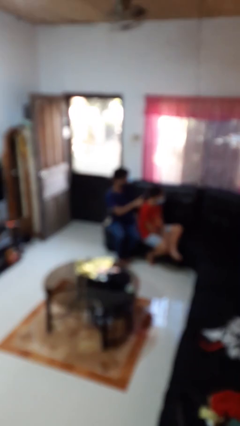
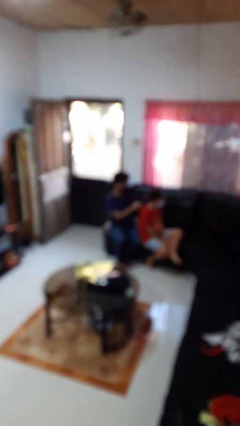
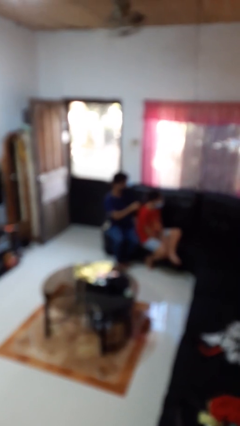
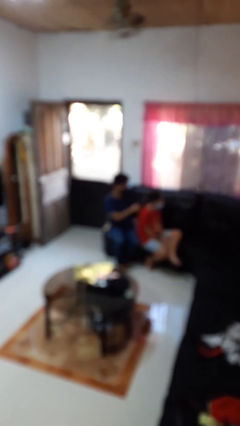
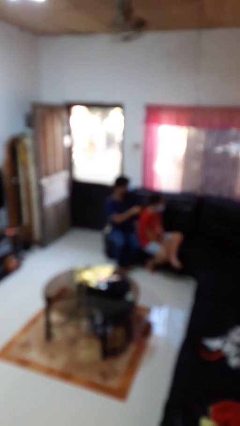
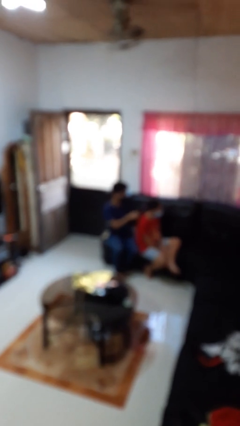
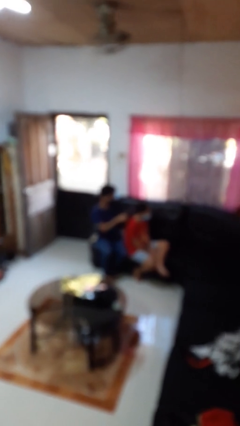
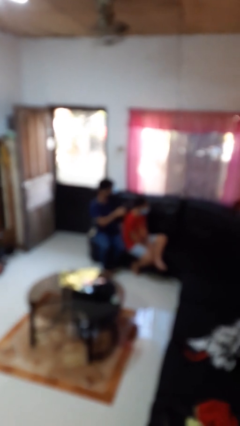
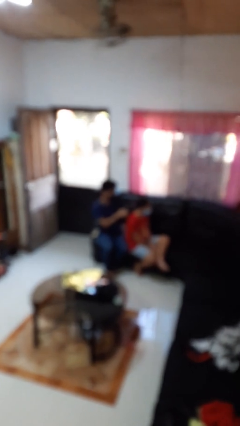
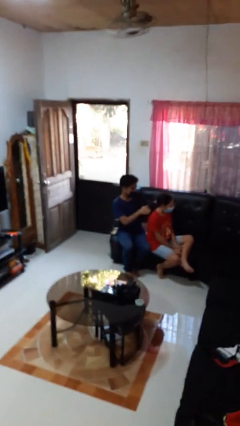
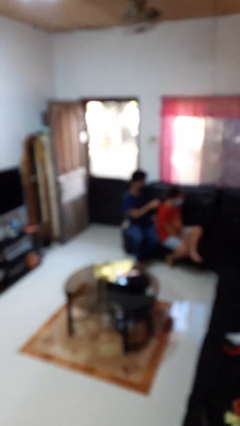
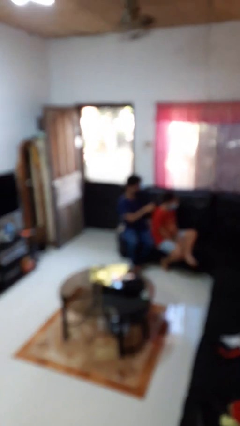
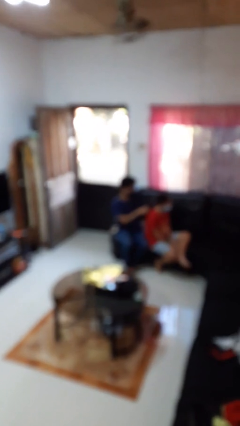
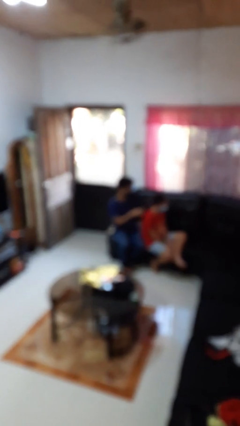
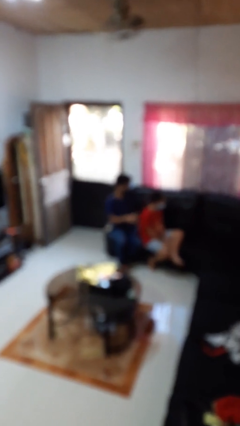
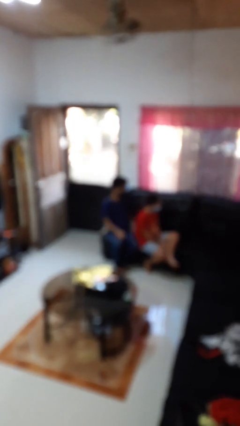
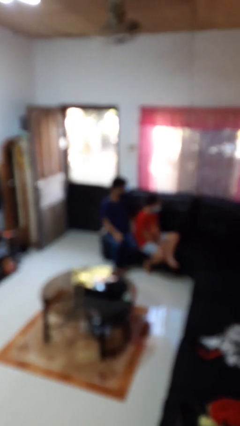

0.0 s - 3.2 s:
person braids hair of person

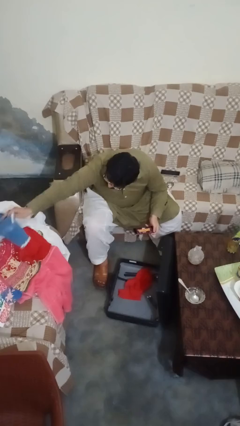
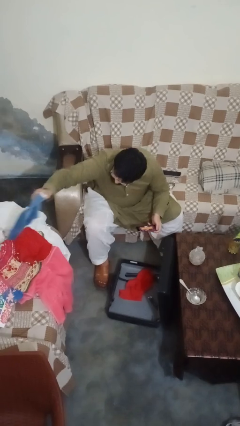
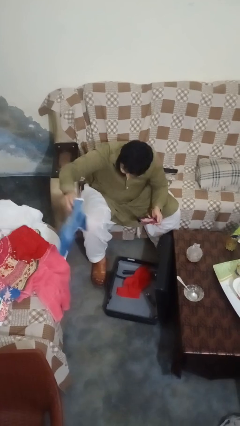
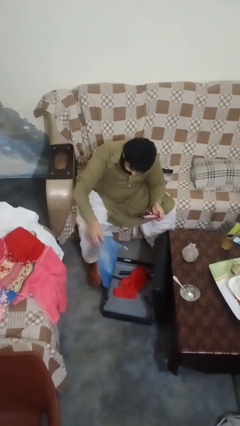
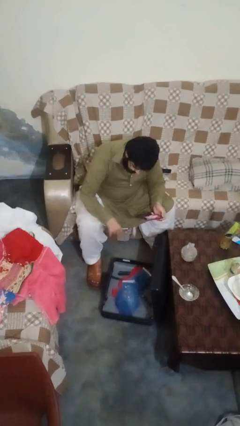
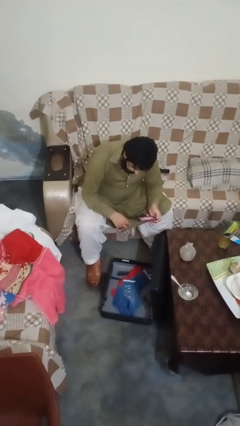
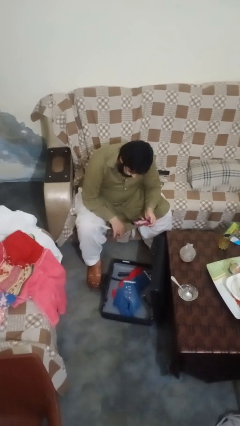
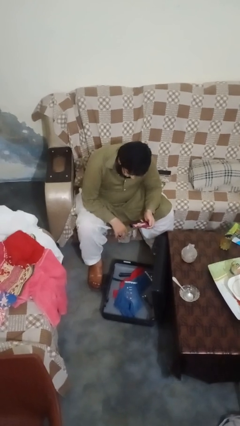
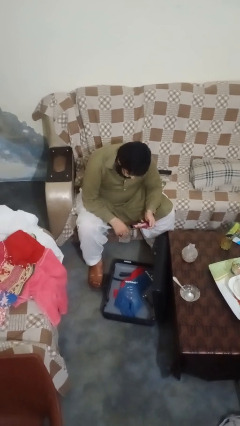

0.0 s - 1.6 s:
person loads clothes into suitcase

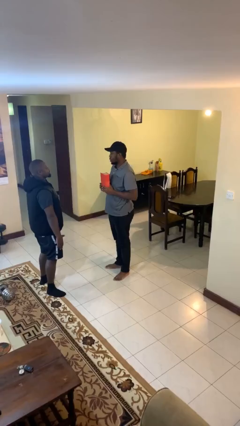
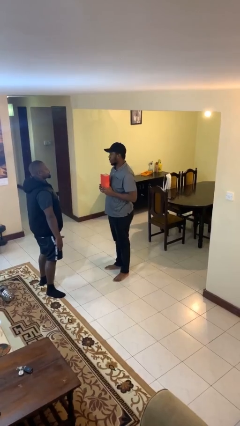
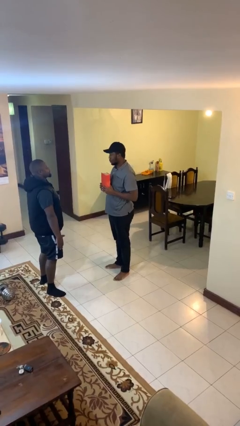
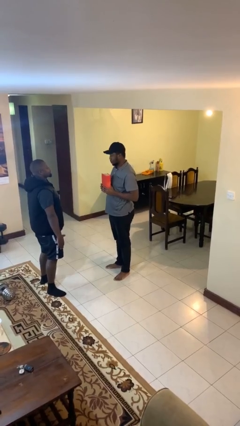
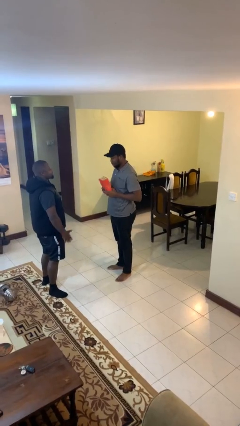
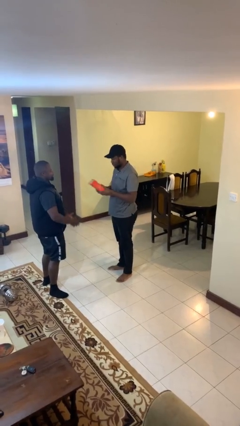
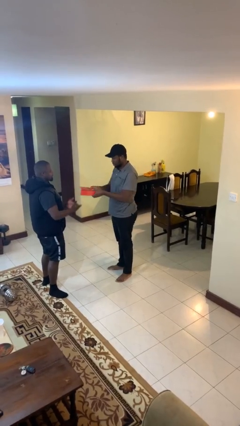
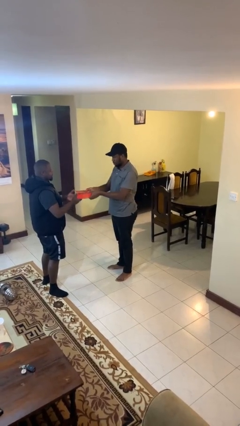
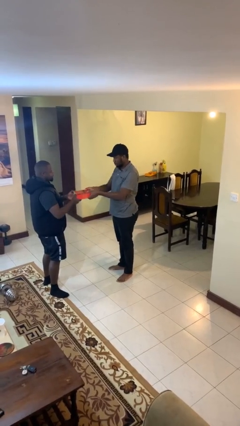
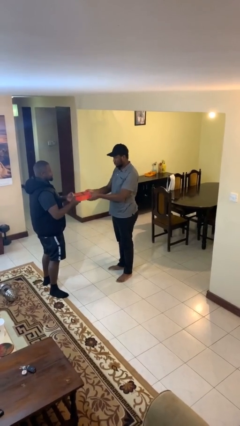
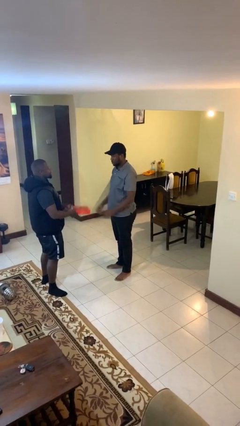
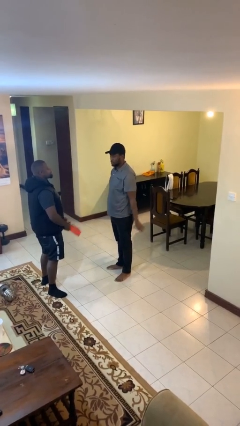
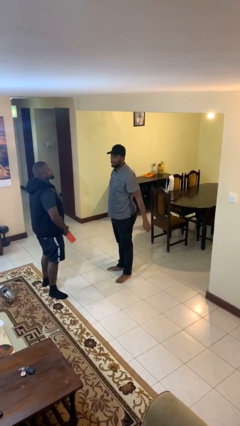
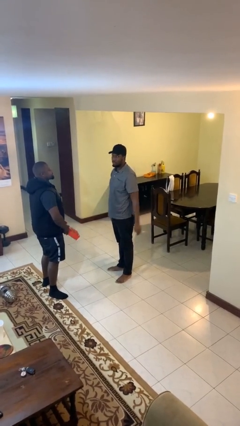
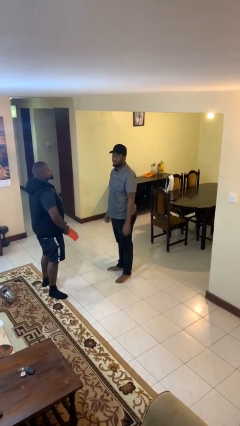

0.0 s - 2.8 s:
person transfers object to person

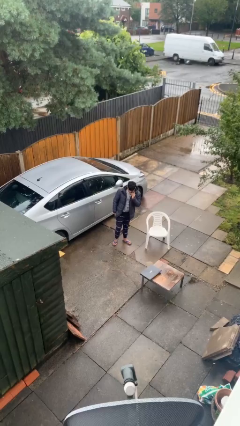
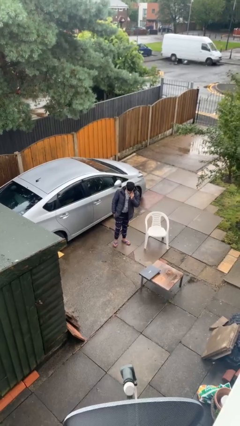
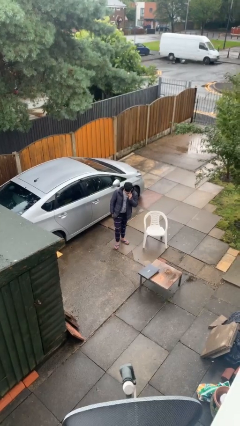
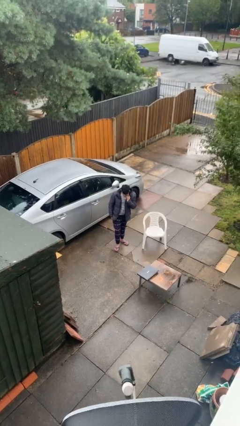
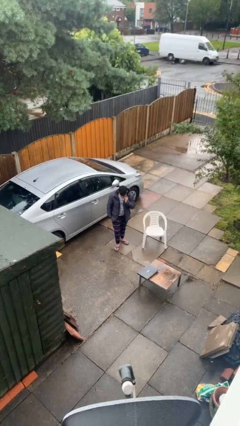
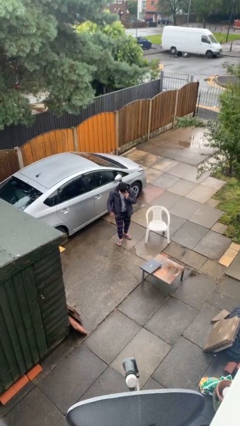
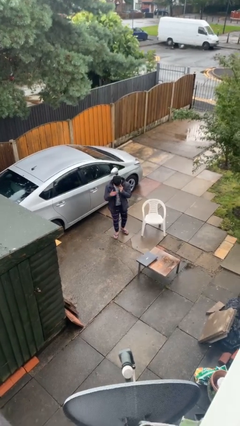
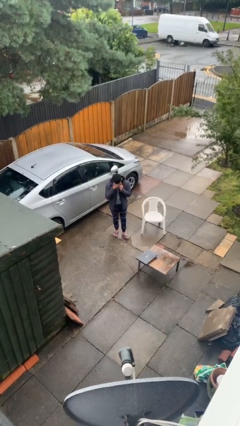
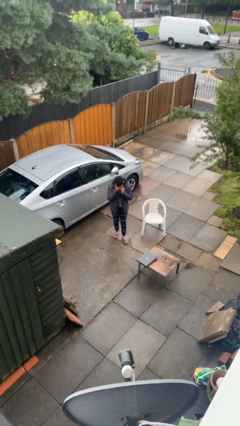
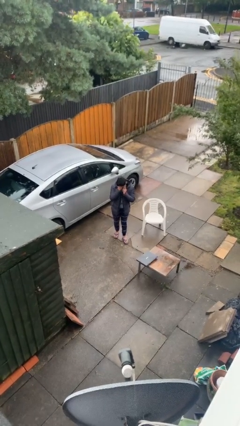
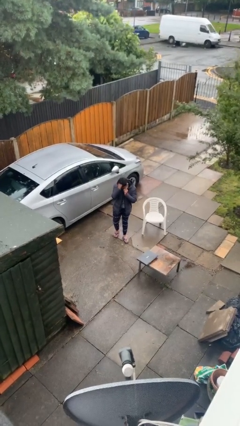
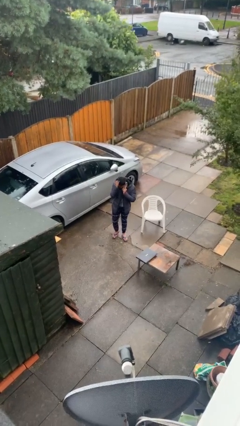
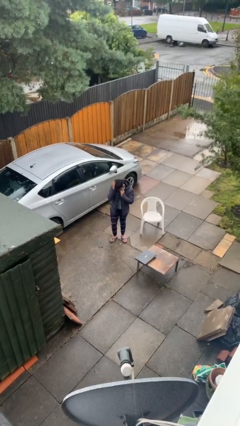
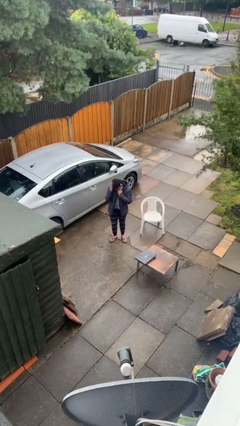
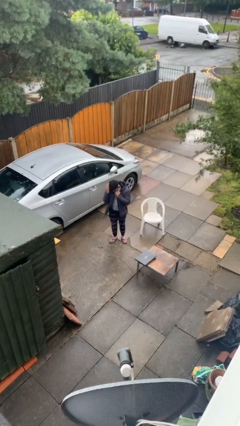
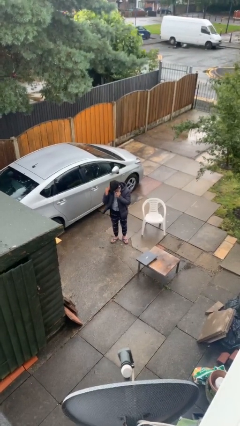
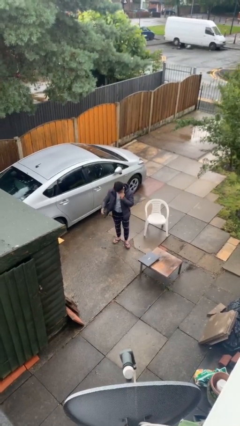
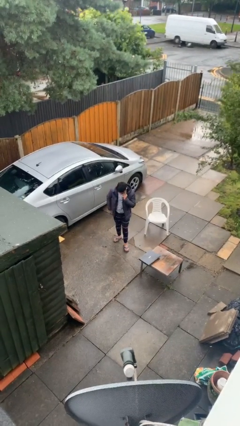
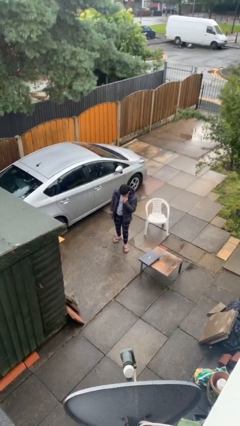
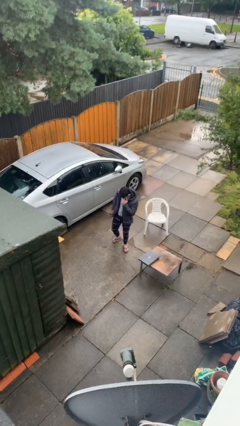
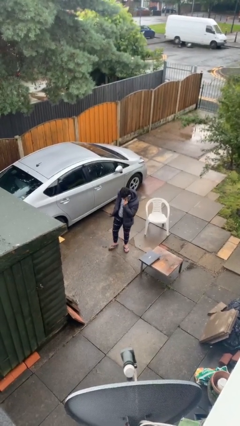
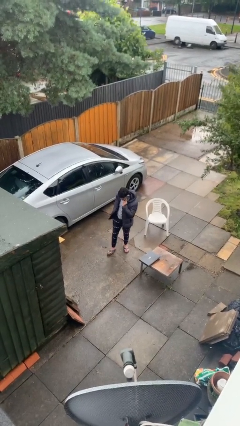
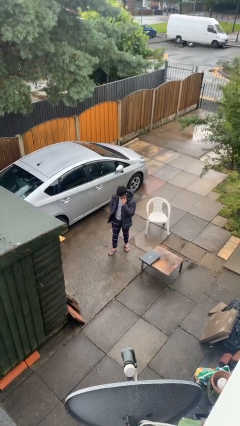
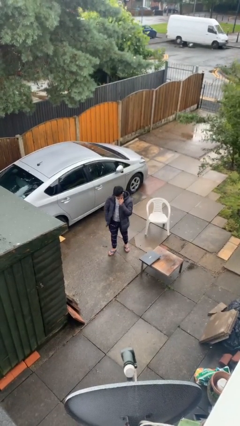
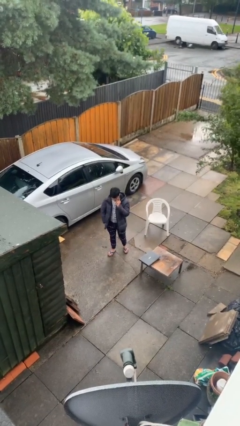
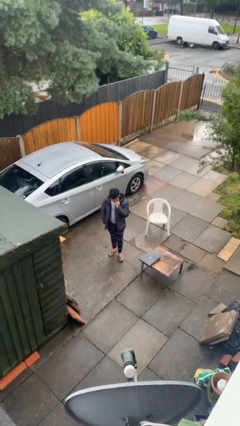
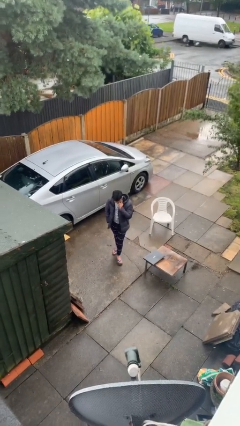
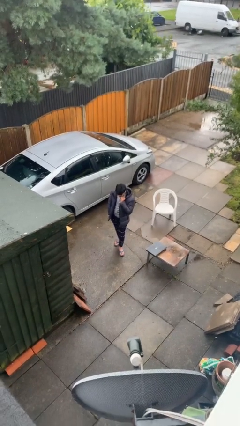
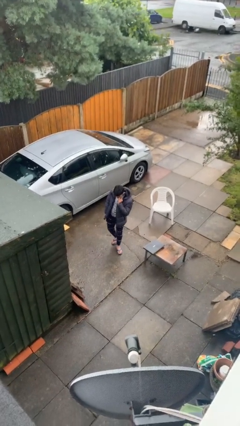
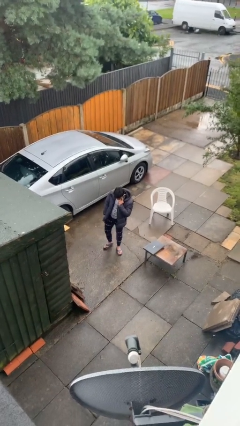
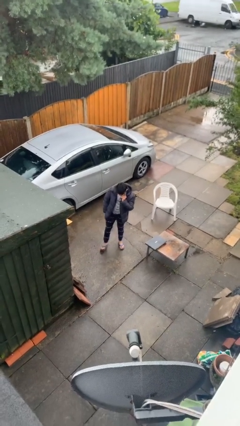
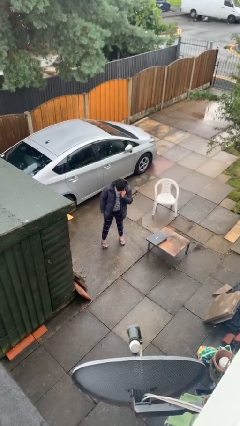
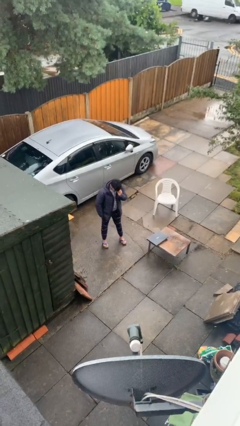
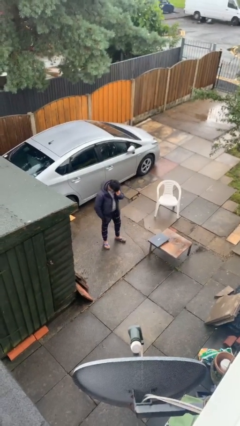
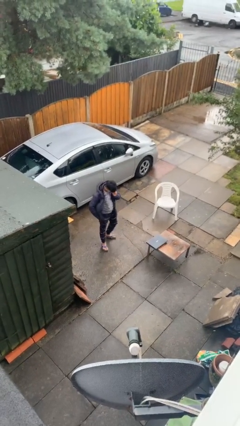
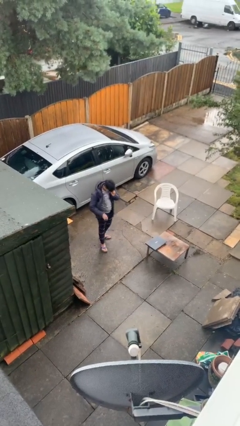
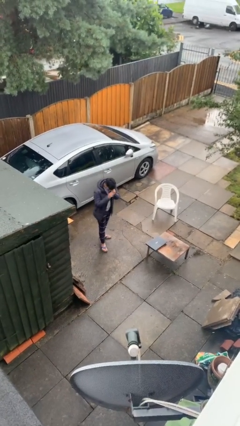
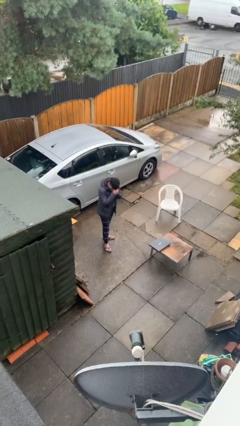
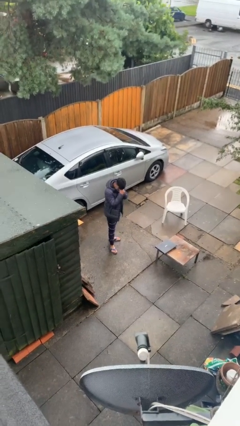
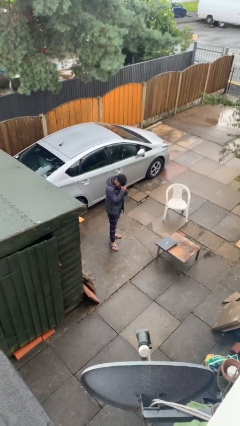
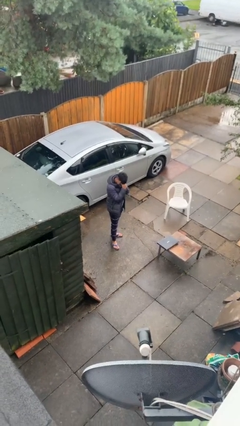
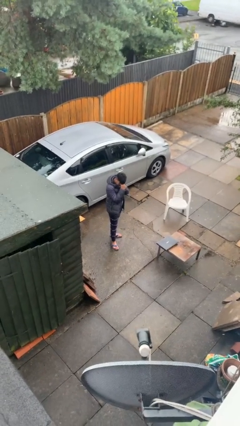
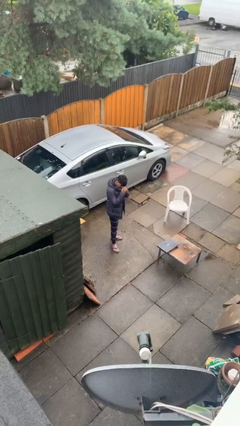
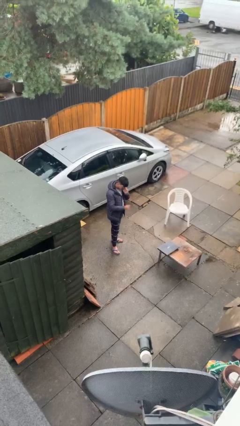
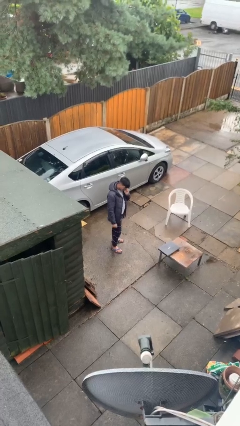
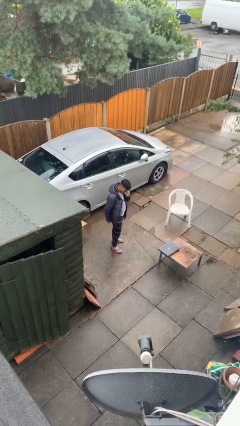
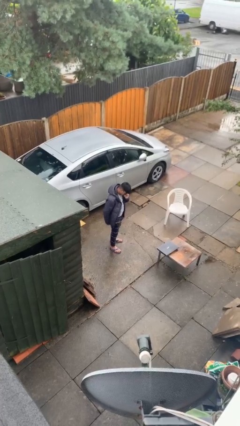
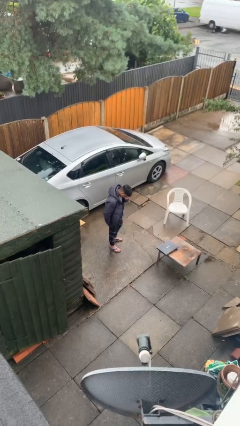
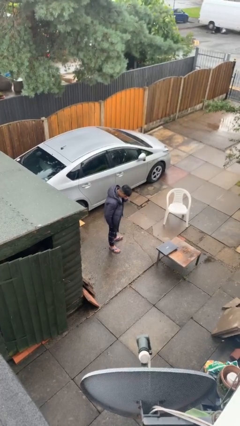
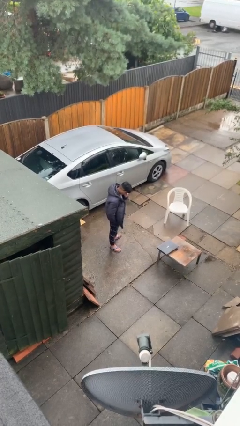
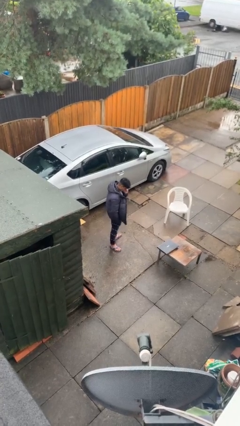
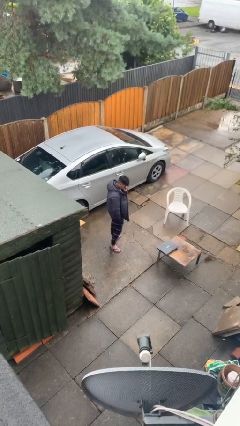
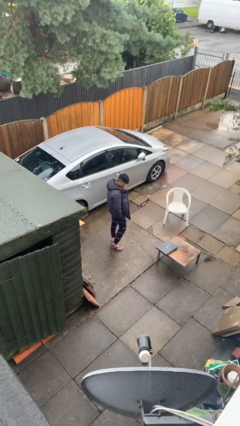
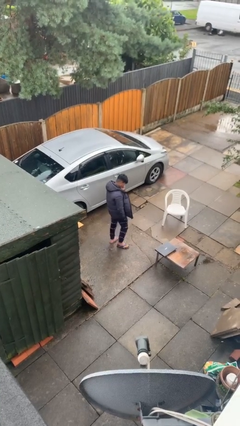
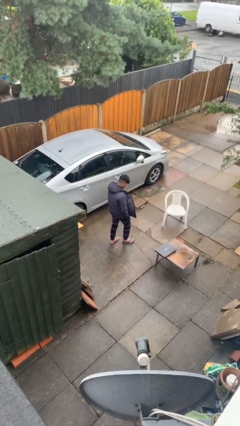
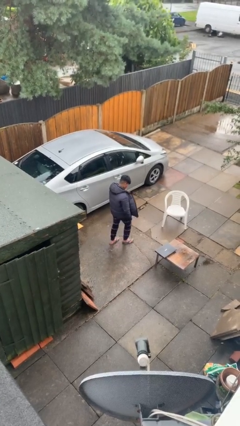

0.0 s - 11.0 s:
person talks on phone
